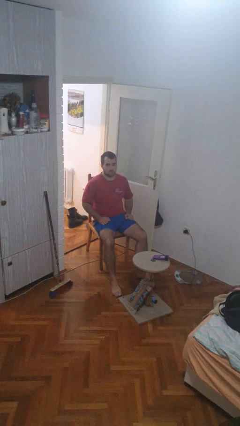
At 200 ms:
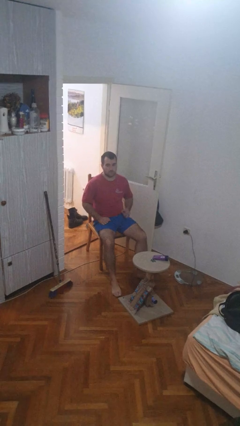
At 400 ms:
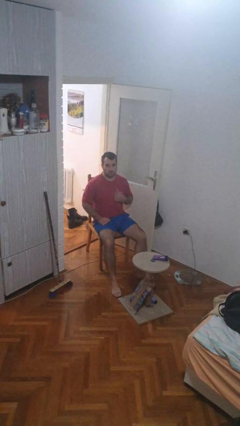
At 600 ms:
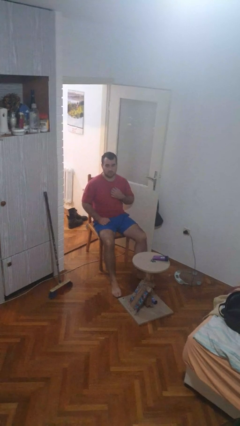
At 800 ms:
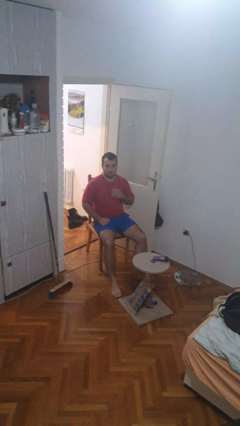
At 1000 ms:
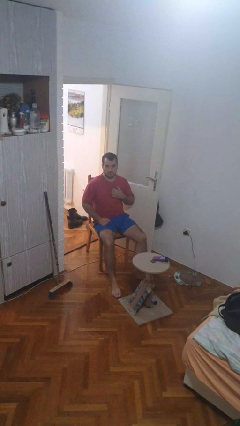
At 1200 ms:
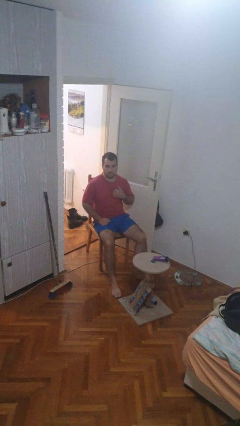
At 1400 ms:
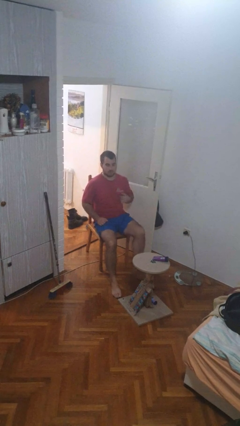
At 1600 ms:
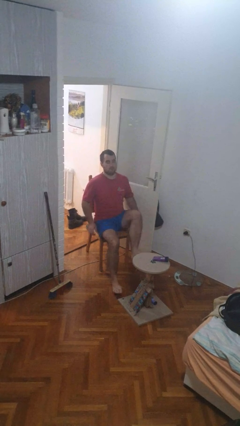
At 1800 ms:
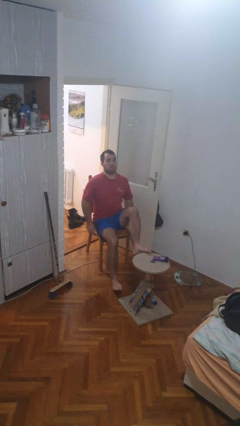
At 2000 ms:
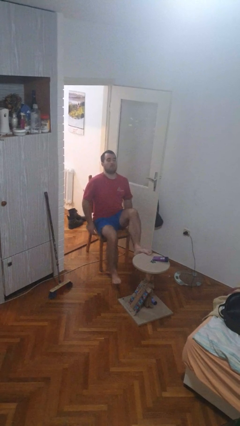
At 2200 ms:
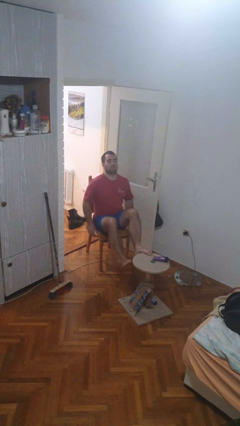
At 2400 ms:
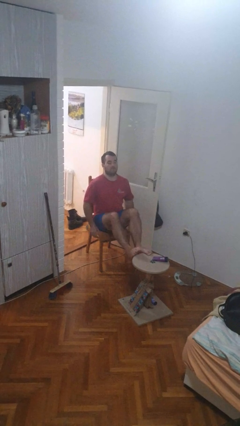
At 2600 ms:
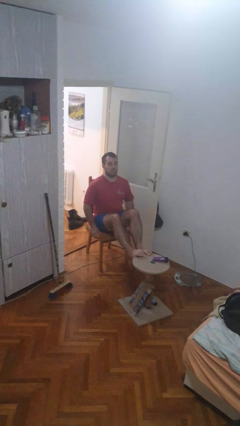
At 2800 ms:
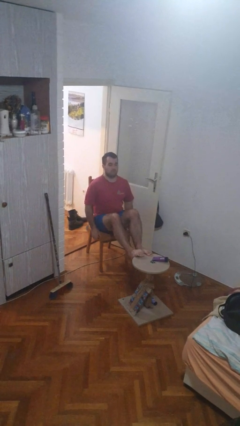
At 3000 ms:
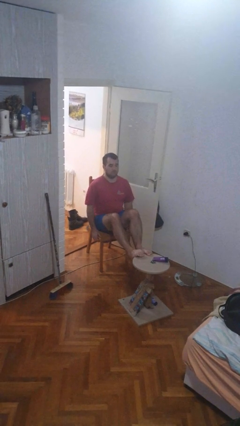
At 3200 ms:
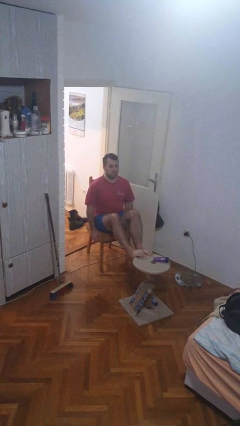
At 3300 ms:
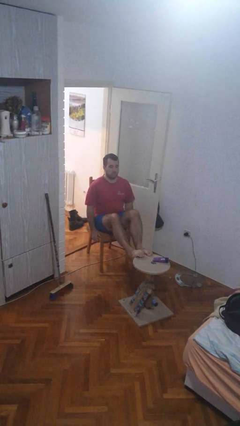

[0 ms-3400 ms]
person puts feet up

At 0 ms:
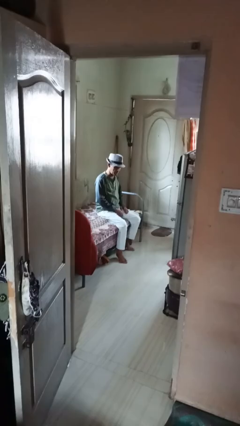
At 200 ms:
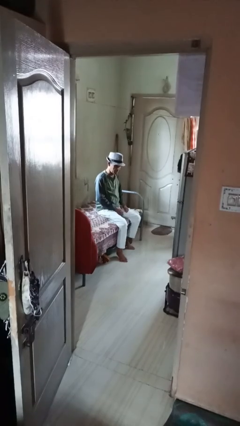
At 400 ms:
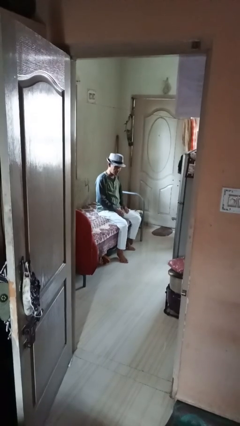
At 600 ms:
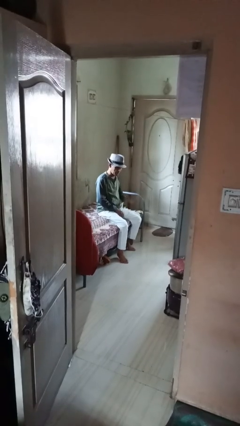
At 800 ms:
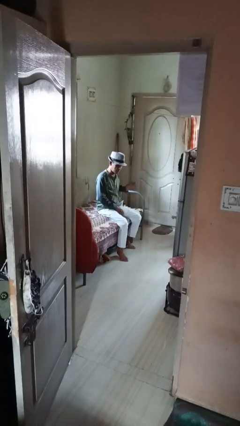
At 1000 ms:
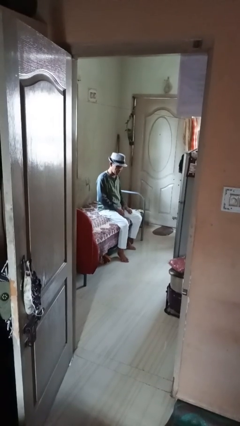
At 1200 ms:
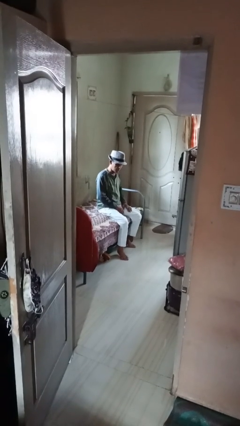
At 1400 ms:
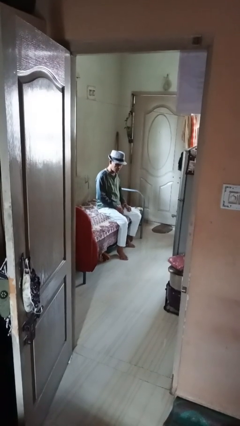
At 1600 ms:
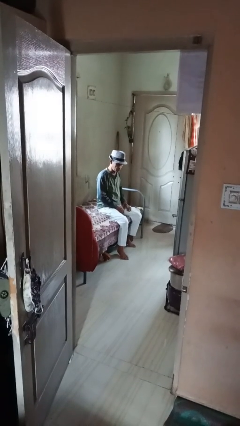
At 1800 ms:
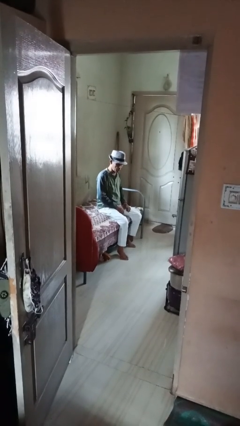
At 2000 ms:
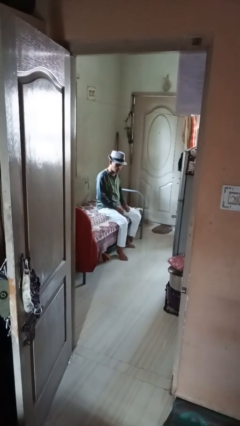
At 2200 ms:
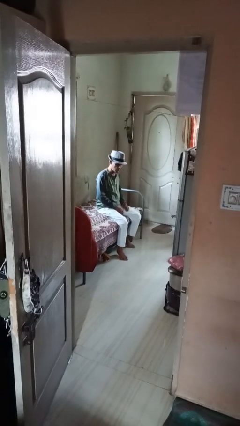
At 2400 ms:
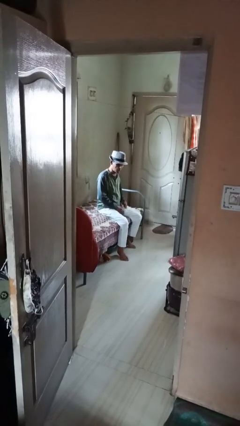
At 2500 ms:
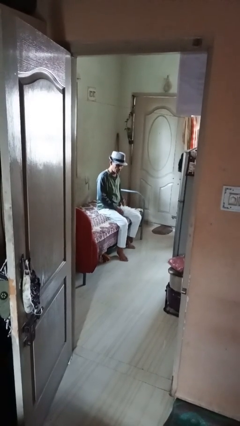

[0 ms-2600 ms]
person swats bug

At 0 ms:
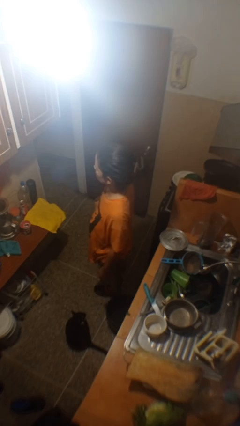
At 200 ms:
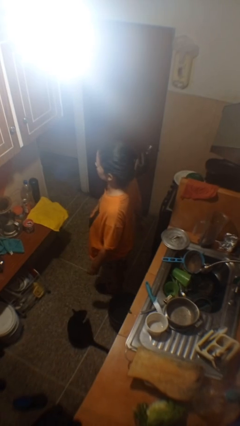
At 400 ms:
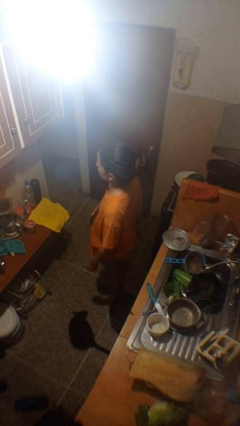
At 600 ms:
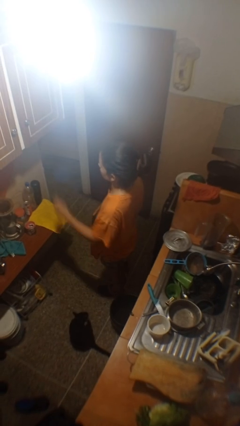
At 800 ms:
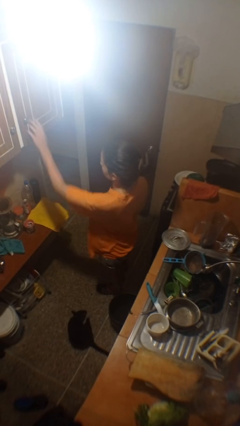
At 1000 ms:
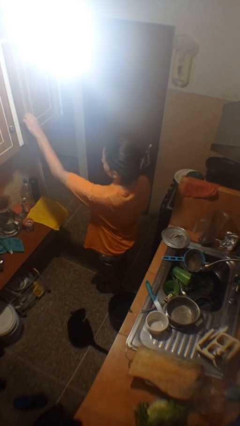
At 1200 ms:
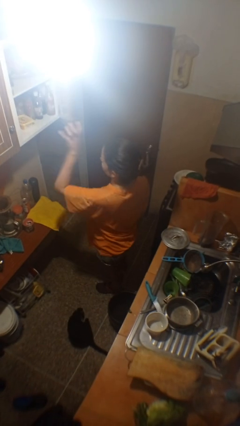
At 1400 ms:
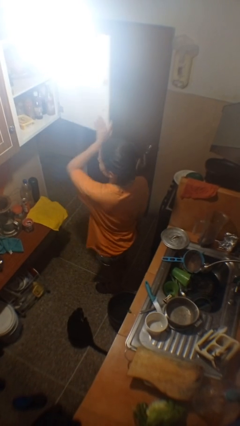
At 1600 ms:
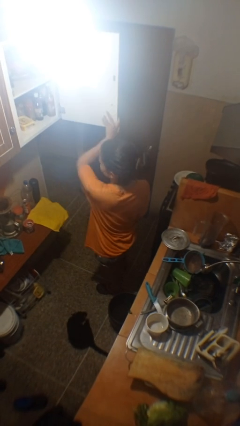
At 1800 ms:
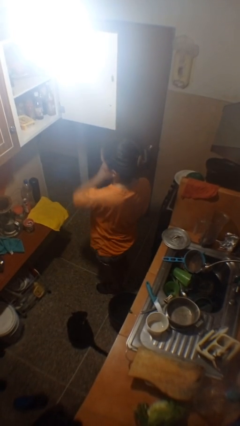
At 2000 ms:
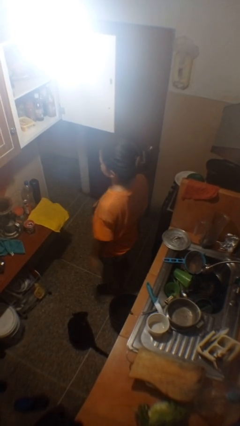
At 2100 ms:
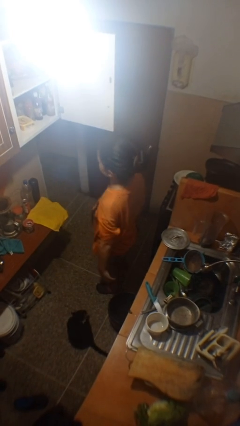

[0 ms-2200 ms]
person opens cabinet

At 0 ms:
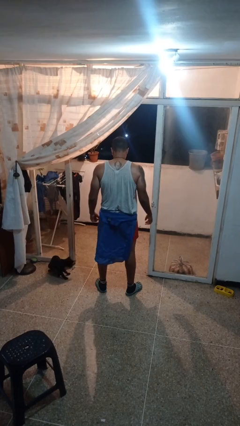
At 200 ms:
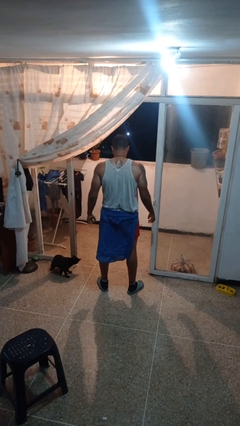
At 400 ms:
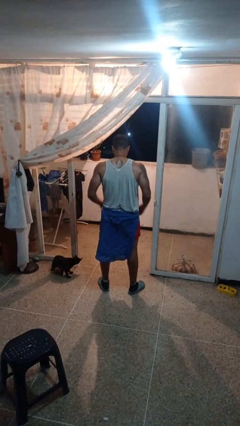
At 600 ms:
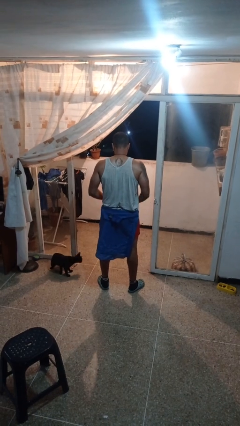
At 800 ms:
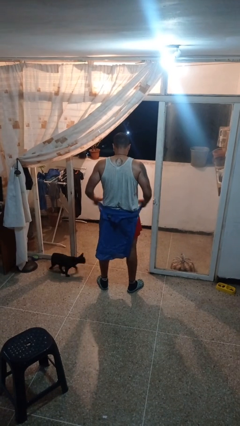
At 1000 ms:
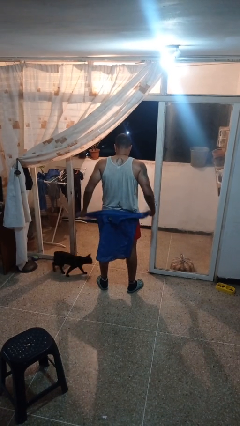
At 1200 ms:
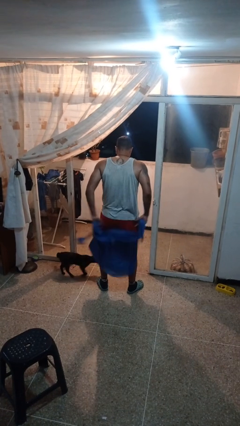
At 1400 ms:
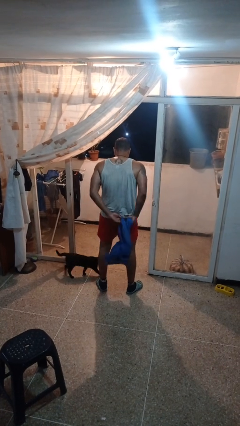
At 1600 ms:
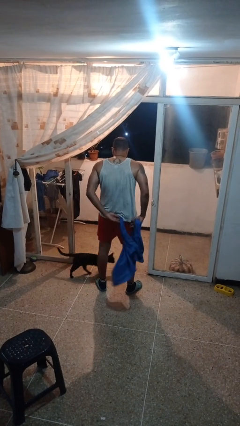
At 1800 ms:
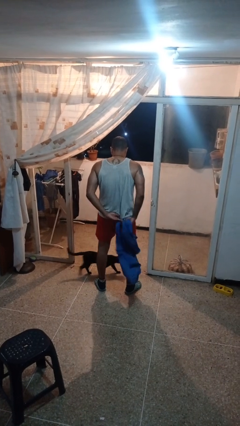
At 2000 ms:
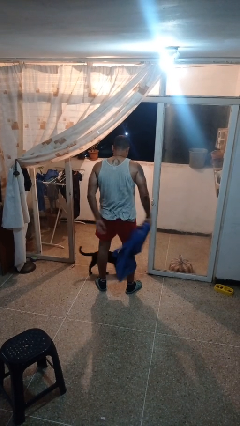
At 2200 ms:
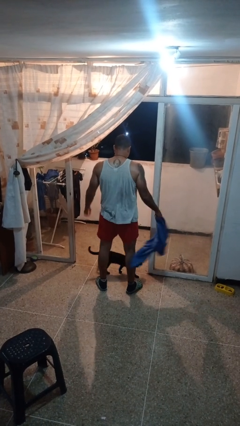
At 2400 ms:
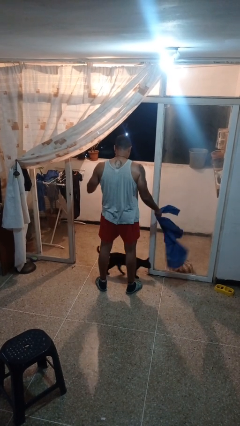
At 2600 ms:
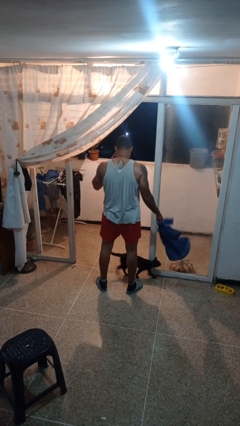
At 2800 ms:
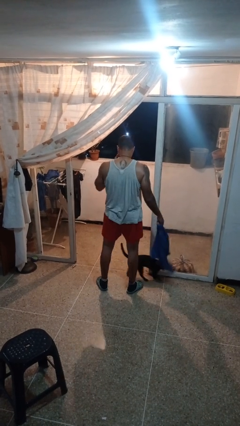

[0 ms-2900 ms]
person unties jacket around waist

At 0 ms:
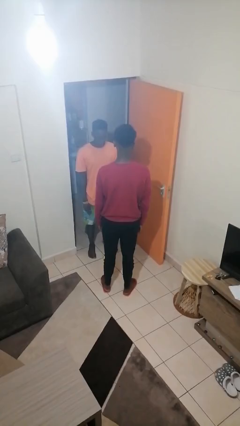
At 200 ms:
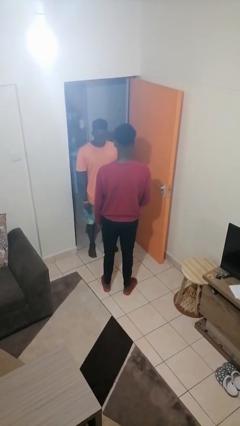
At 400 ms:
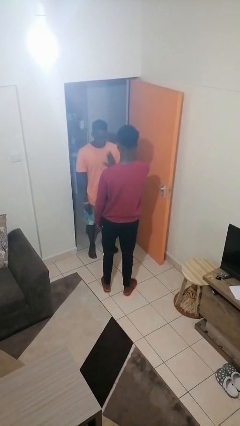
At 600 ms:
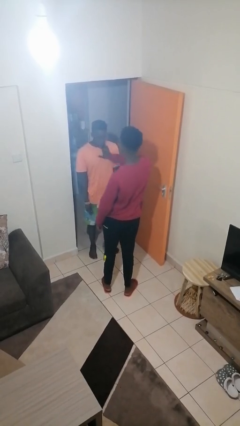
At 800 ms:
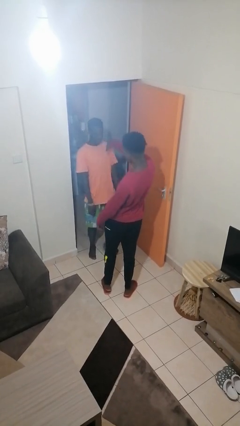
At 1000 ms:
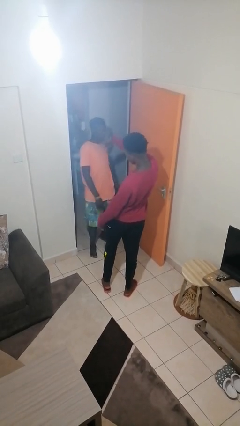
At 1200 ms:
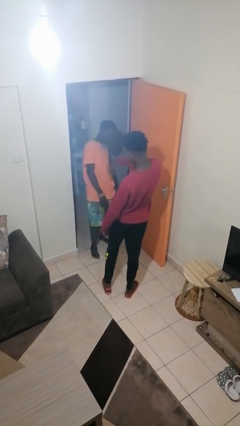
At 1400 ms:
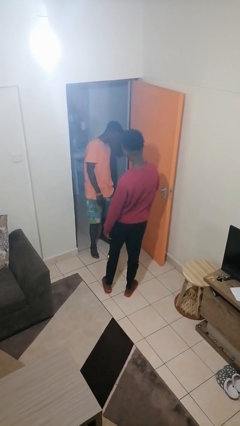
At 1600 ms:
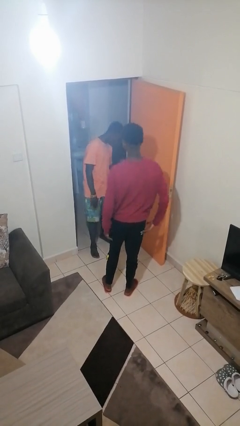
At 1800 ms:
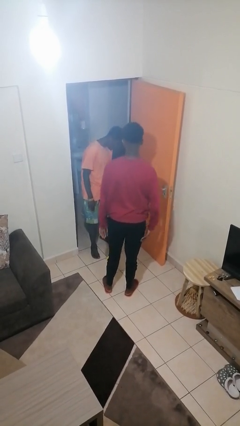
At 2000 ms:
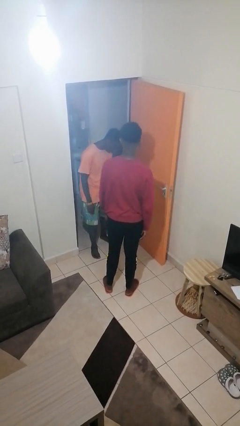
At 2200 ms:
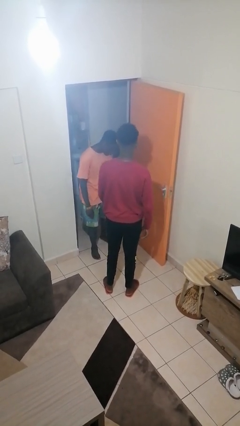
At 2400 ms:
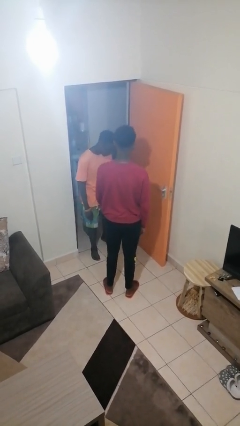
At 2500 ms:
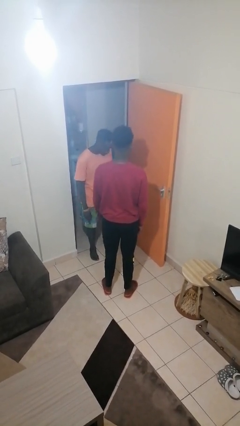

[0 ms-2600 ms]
person shoves person

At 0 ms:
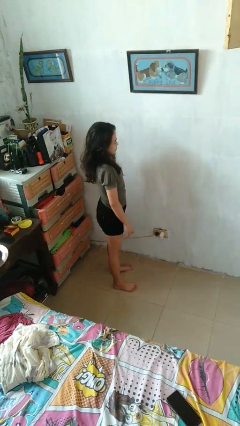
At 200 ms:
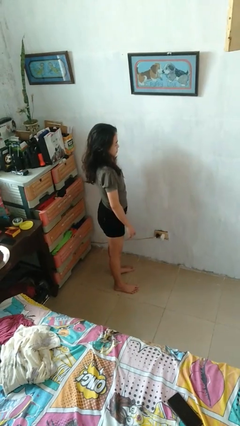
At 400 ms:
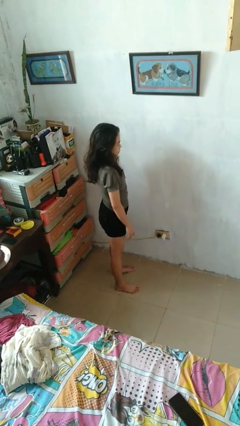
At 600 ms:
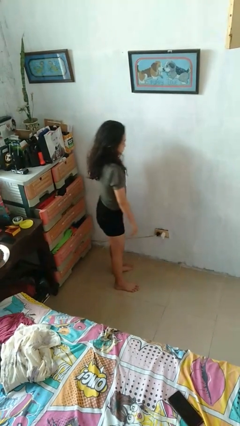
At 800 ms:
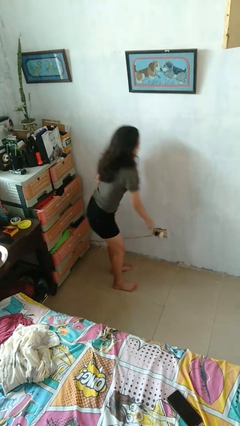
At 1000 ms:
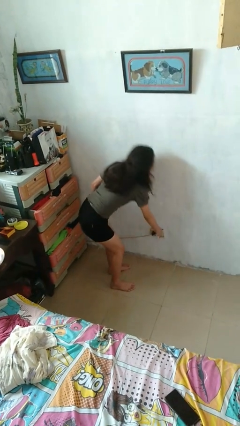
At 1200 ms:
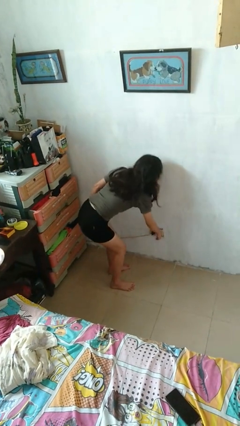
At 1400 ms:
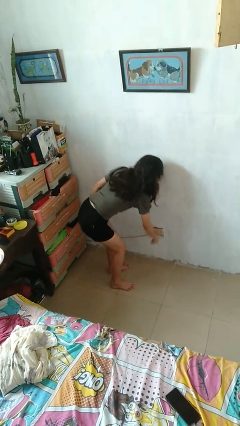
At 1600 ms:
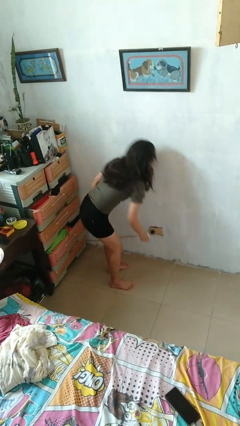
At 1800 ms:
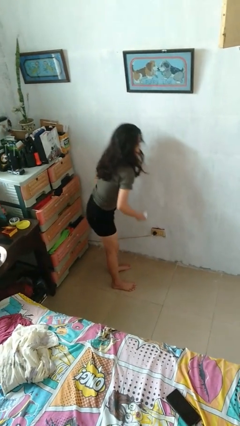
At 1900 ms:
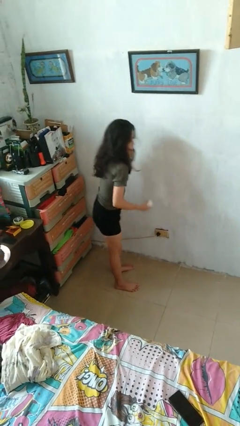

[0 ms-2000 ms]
person unplugs from electrical socket

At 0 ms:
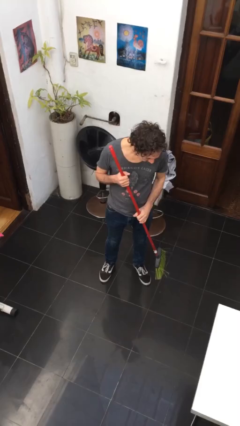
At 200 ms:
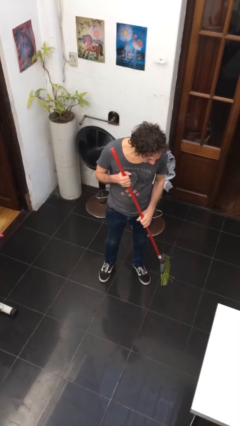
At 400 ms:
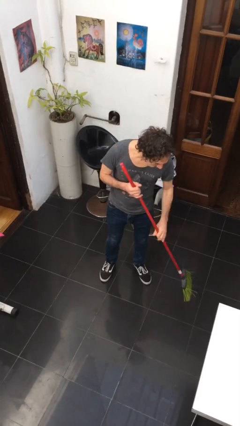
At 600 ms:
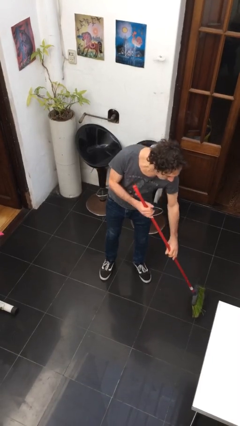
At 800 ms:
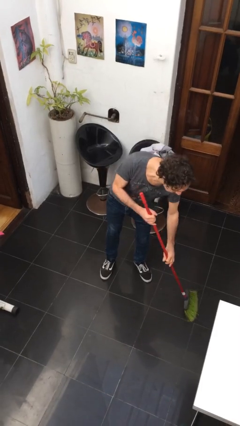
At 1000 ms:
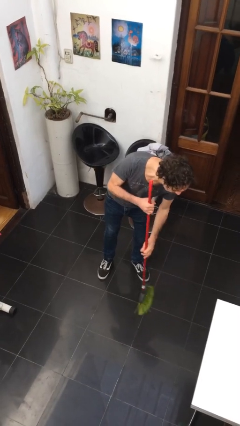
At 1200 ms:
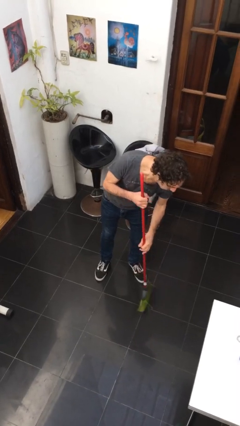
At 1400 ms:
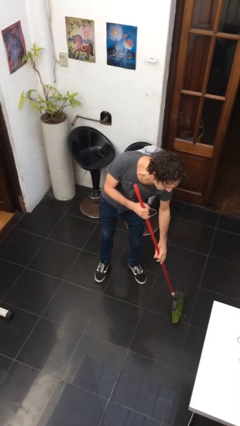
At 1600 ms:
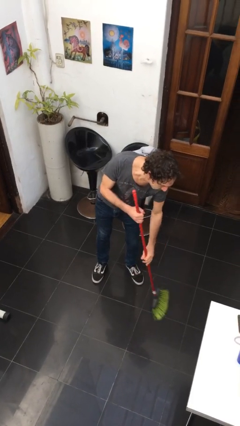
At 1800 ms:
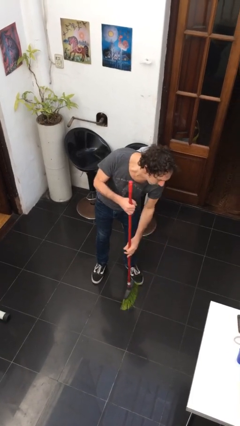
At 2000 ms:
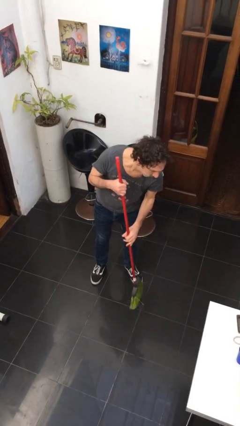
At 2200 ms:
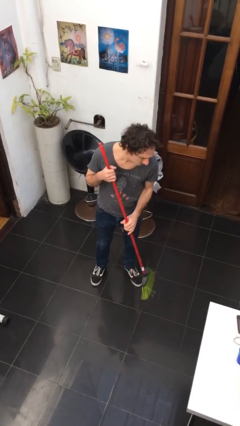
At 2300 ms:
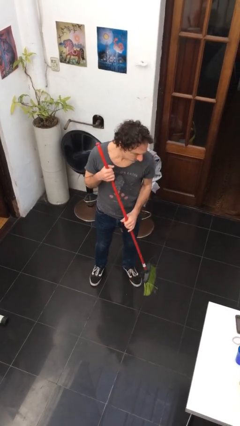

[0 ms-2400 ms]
person sweeps floor
